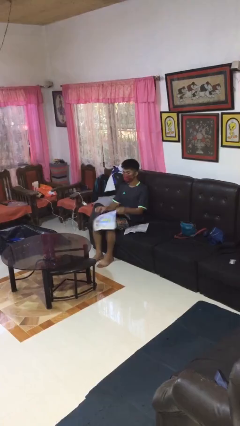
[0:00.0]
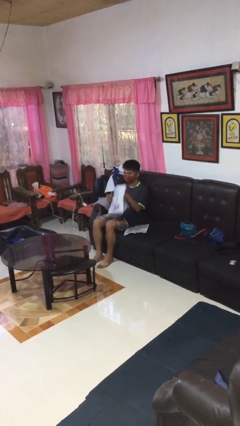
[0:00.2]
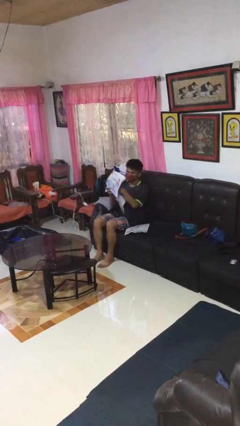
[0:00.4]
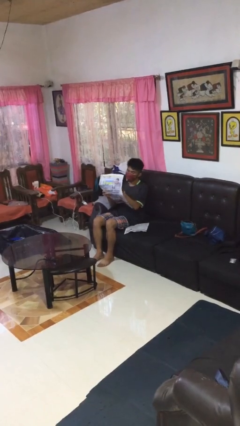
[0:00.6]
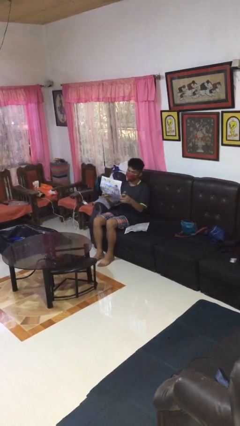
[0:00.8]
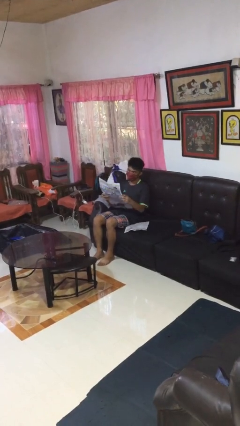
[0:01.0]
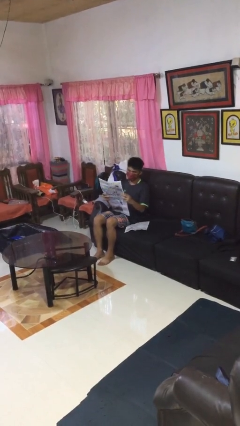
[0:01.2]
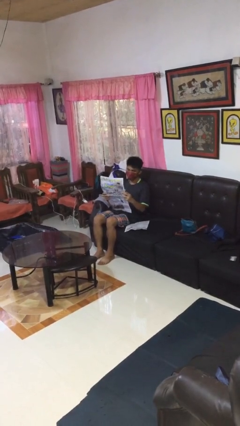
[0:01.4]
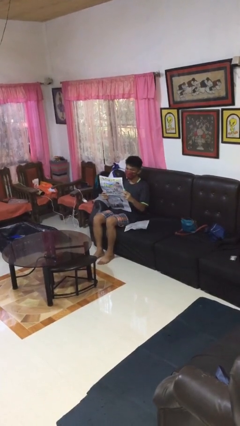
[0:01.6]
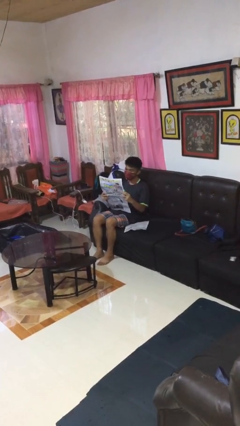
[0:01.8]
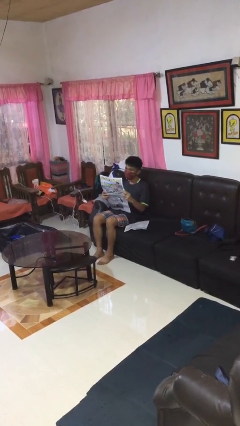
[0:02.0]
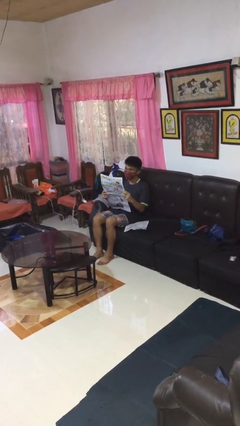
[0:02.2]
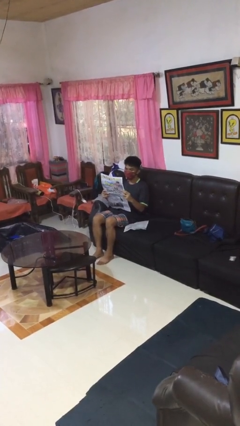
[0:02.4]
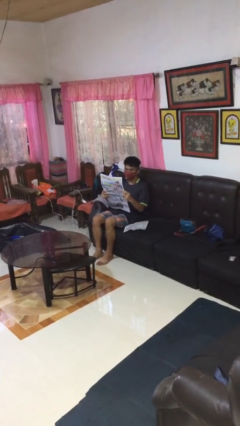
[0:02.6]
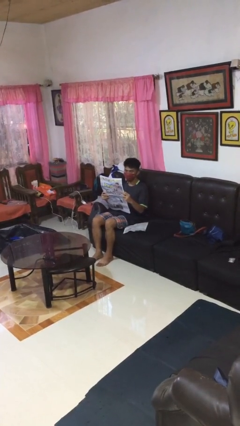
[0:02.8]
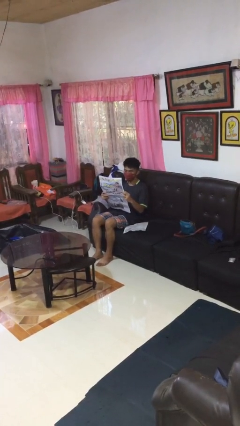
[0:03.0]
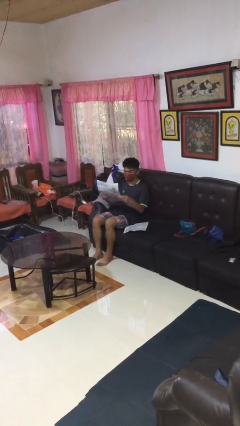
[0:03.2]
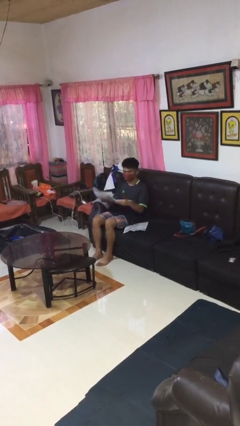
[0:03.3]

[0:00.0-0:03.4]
person reads newspaper

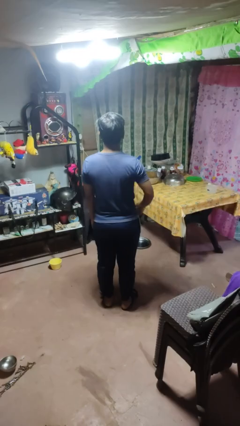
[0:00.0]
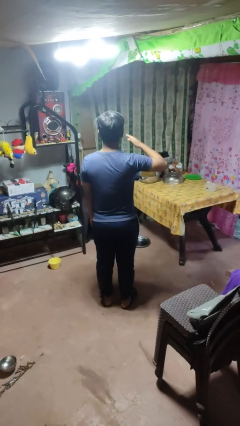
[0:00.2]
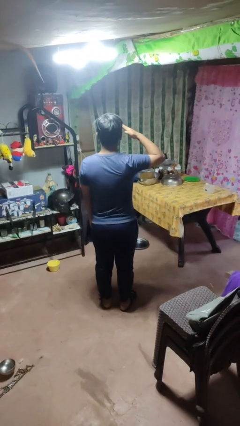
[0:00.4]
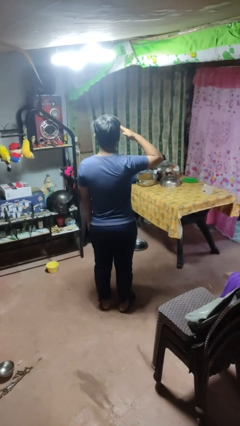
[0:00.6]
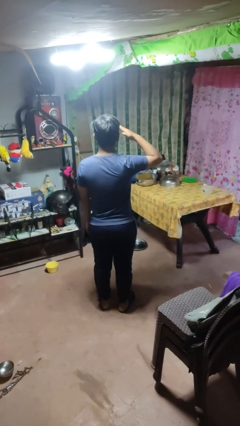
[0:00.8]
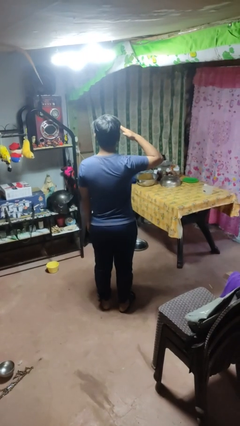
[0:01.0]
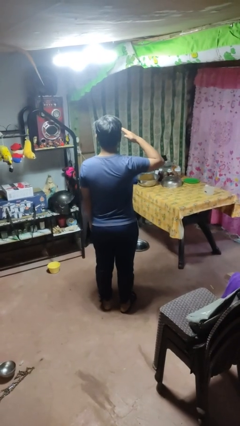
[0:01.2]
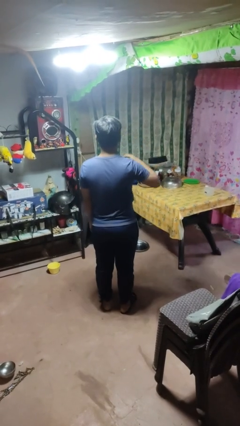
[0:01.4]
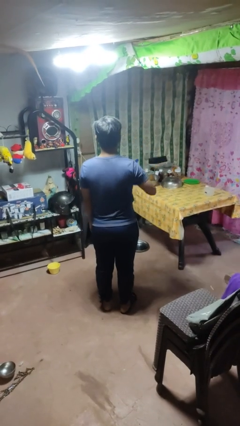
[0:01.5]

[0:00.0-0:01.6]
person salutes

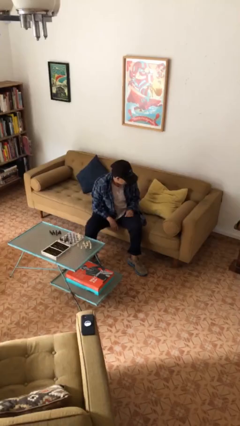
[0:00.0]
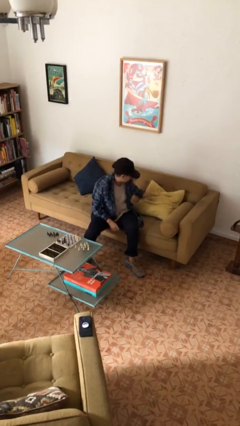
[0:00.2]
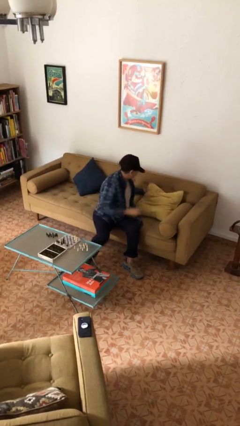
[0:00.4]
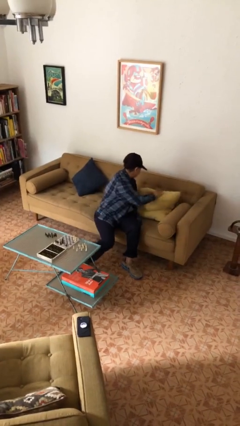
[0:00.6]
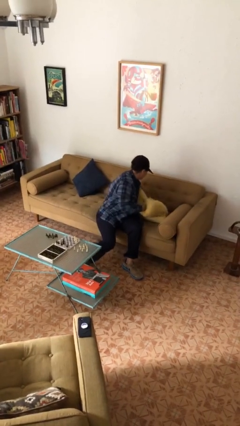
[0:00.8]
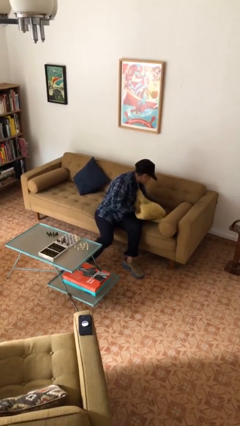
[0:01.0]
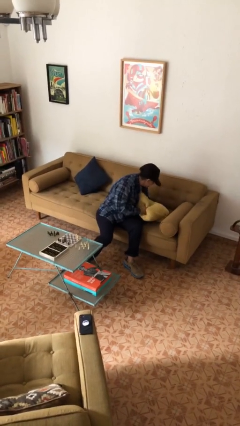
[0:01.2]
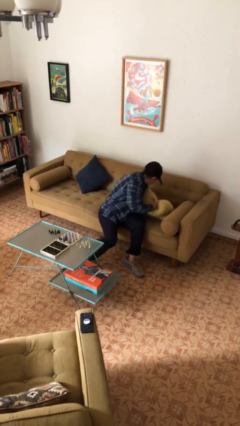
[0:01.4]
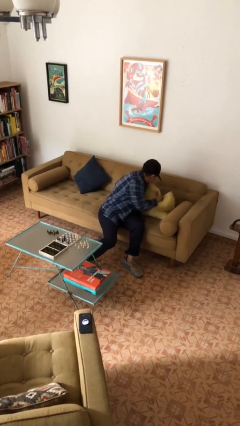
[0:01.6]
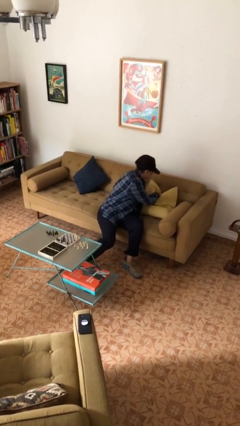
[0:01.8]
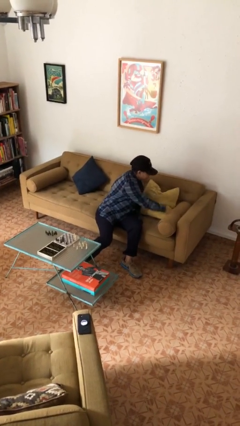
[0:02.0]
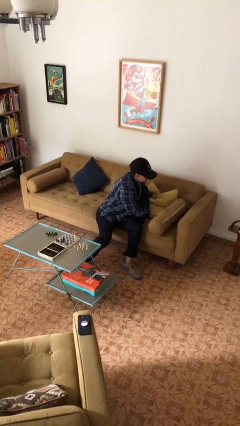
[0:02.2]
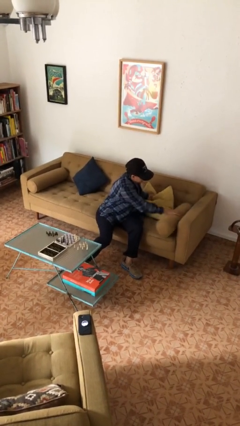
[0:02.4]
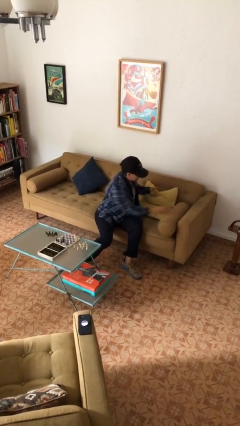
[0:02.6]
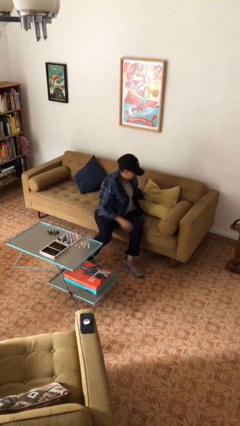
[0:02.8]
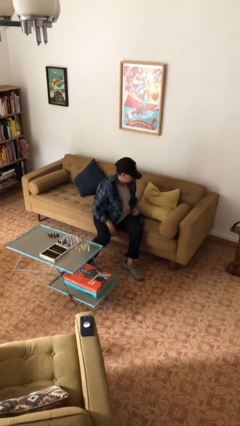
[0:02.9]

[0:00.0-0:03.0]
person searches in couch

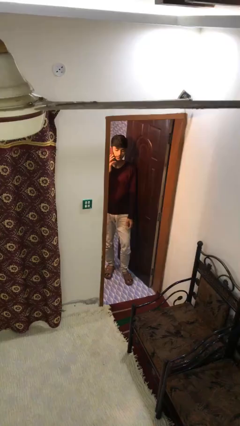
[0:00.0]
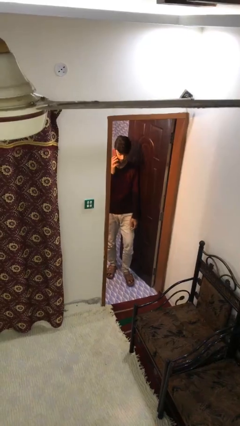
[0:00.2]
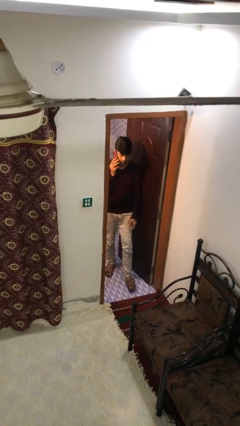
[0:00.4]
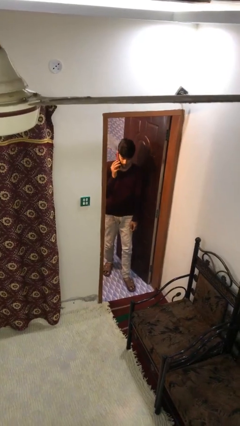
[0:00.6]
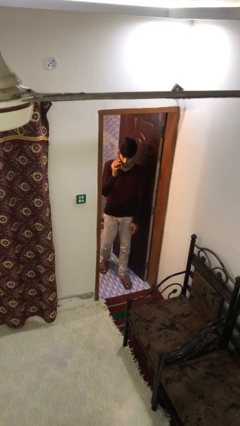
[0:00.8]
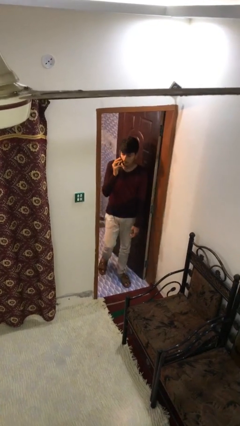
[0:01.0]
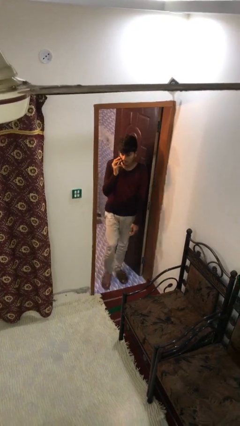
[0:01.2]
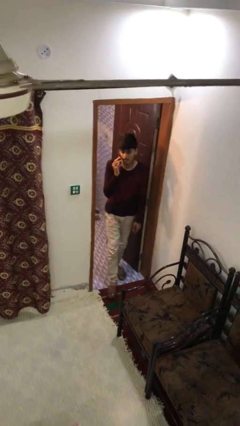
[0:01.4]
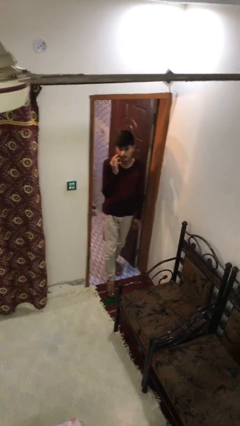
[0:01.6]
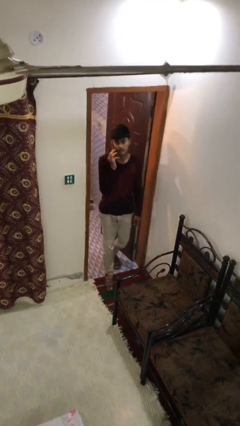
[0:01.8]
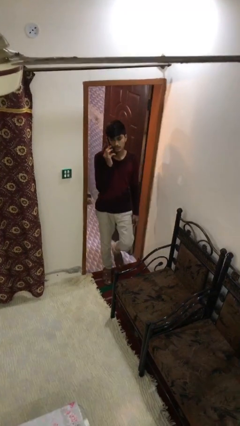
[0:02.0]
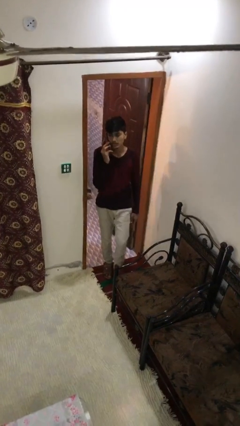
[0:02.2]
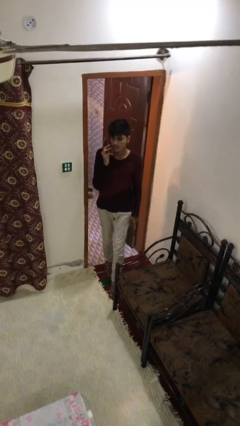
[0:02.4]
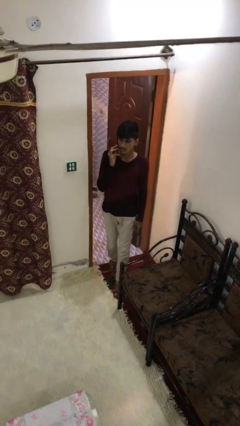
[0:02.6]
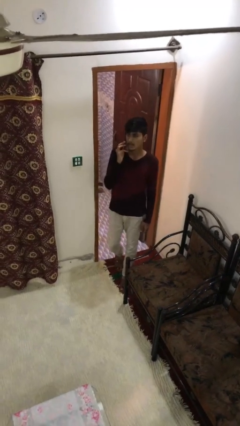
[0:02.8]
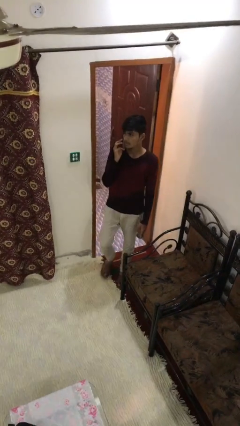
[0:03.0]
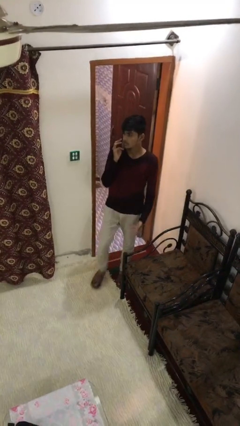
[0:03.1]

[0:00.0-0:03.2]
person enters scene through structure

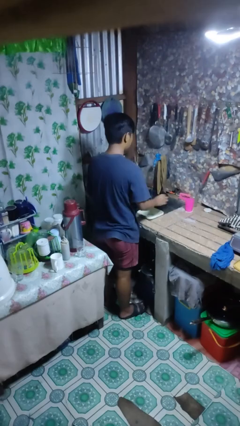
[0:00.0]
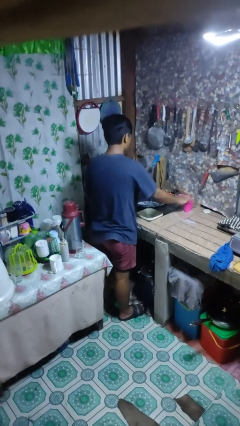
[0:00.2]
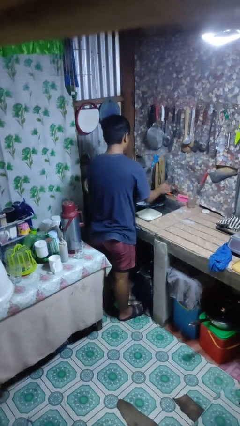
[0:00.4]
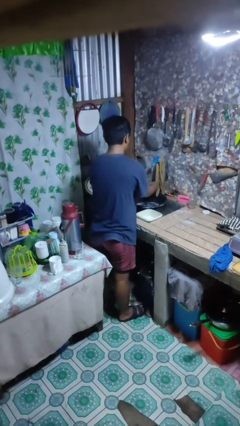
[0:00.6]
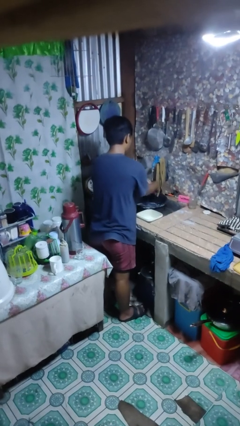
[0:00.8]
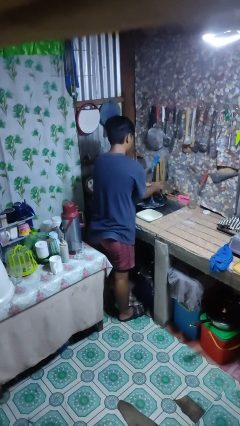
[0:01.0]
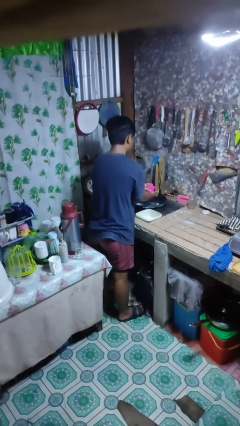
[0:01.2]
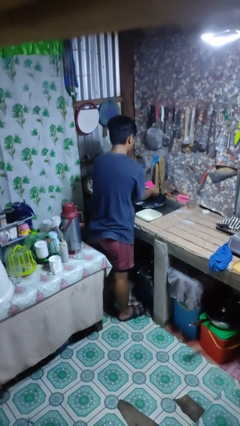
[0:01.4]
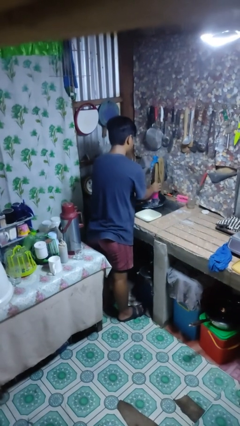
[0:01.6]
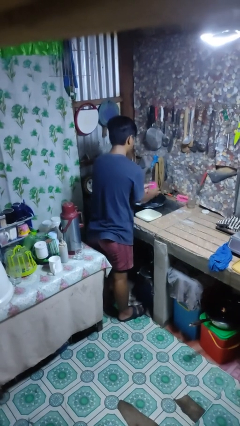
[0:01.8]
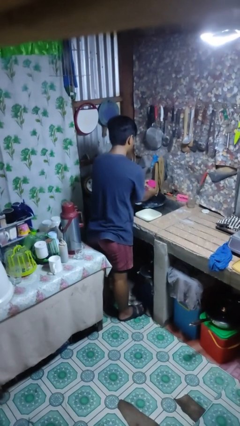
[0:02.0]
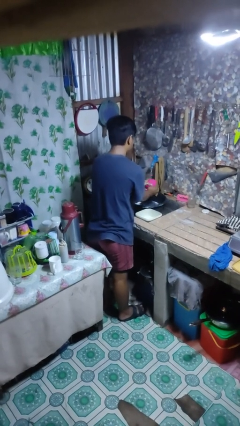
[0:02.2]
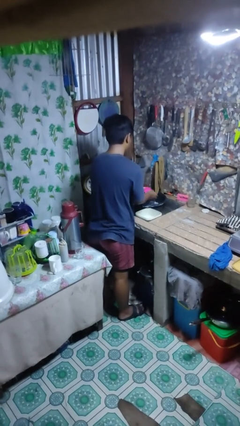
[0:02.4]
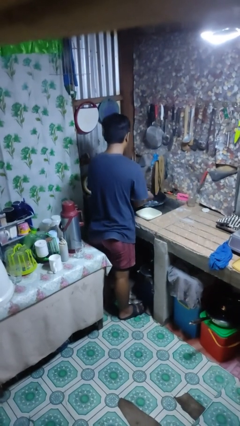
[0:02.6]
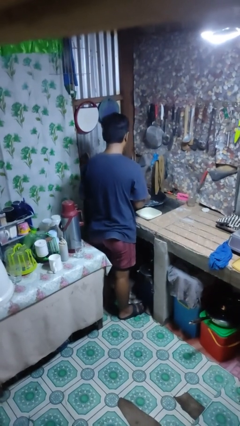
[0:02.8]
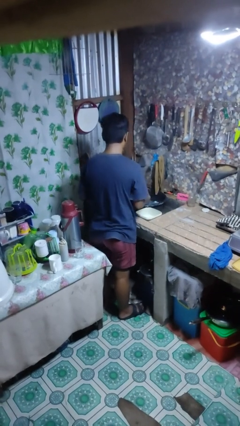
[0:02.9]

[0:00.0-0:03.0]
person washes dish

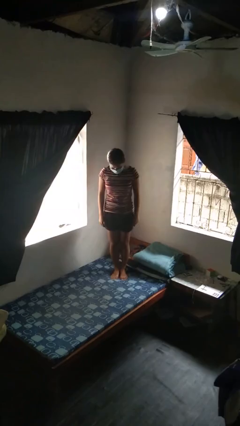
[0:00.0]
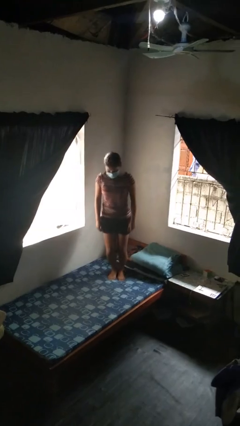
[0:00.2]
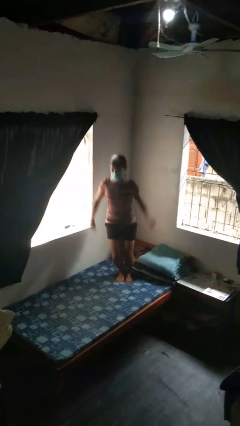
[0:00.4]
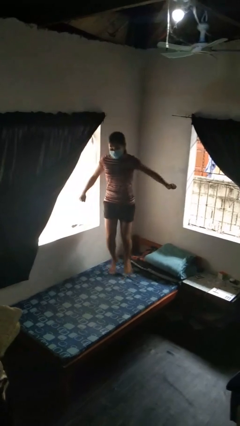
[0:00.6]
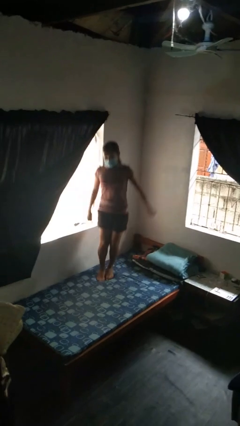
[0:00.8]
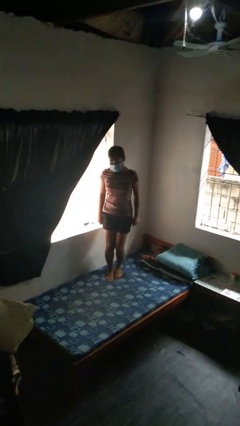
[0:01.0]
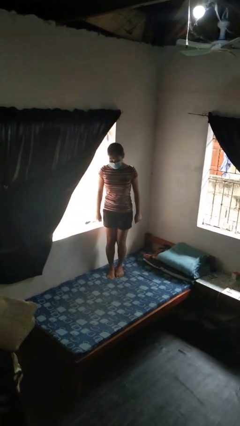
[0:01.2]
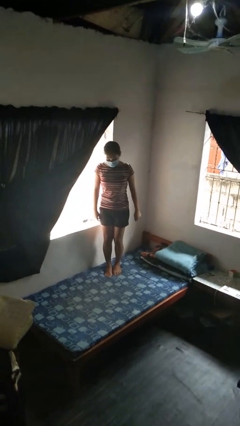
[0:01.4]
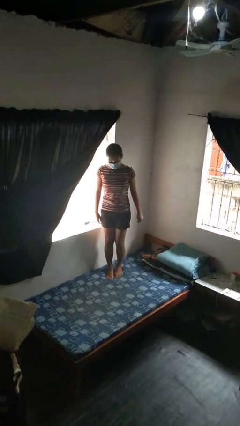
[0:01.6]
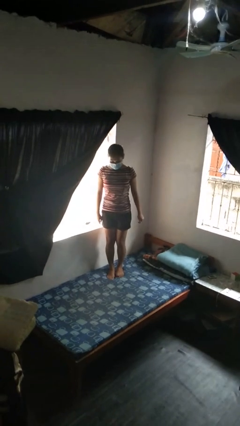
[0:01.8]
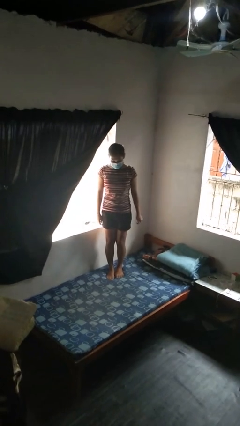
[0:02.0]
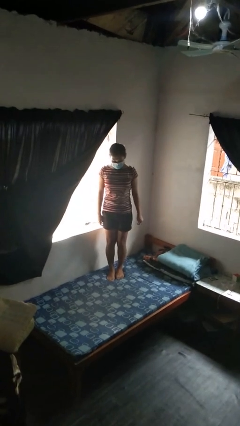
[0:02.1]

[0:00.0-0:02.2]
person jumps on bed

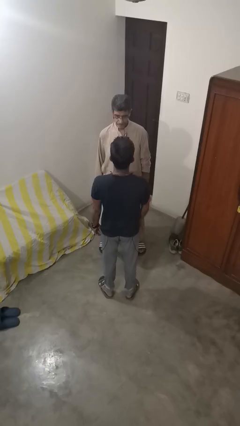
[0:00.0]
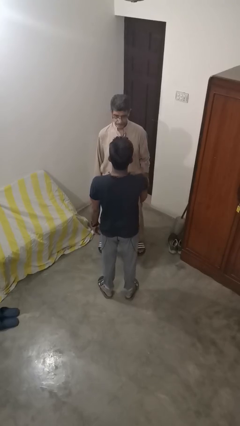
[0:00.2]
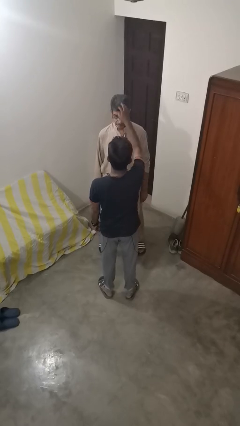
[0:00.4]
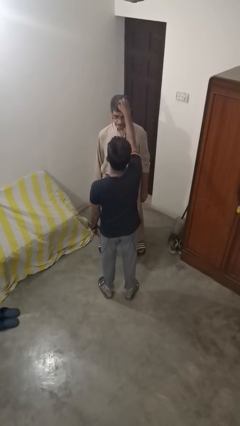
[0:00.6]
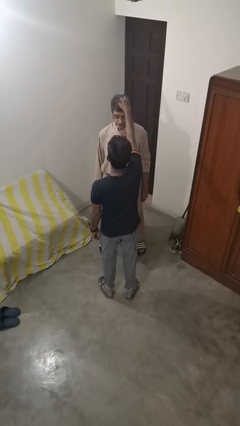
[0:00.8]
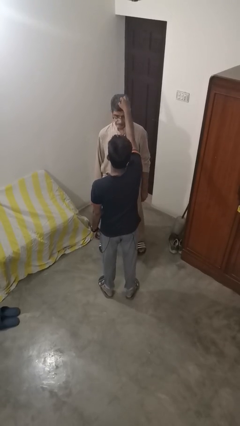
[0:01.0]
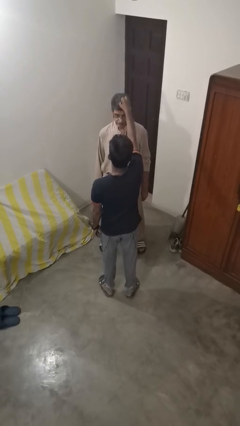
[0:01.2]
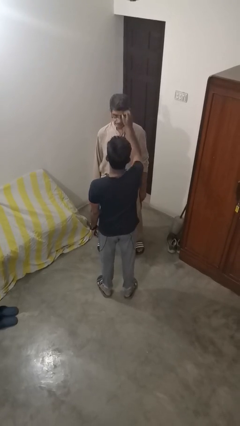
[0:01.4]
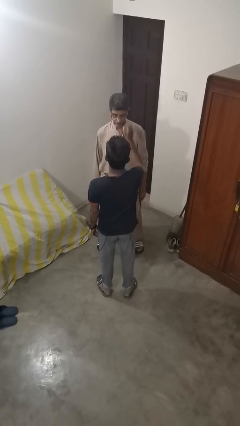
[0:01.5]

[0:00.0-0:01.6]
person grabs person by hair
